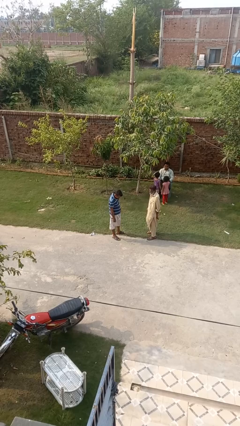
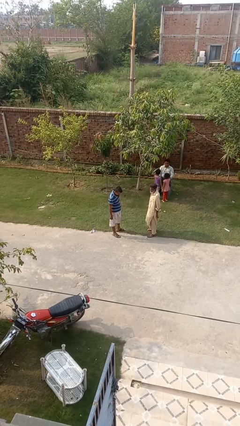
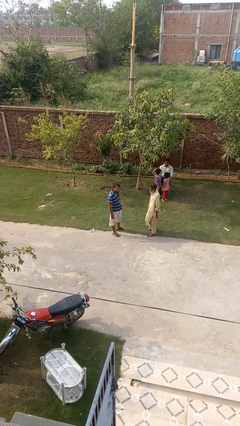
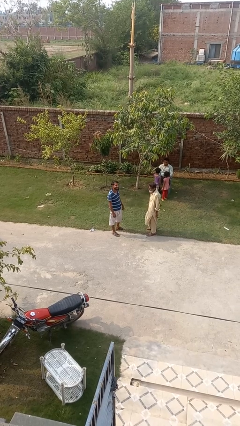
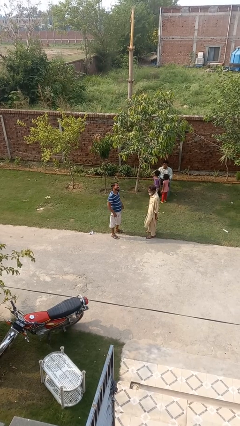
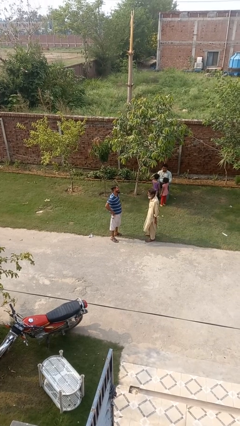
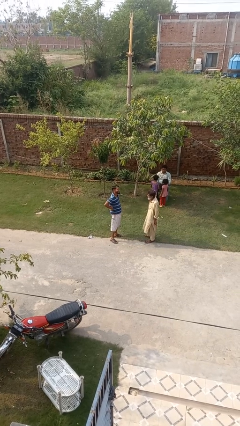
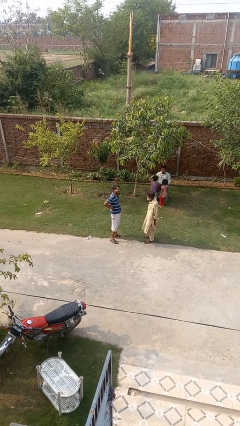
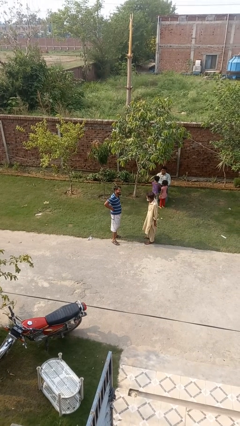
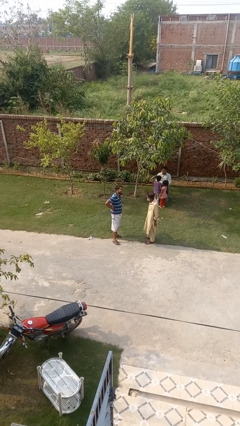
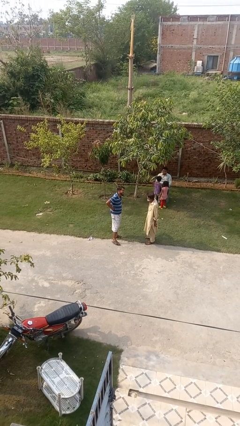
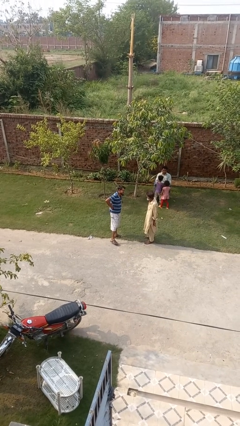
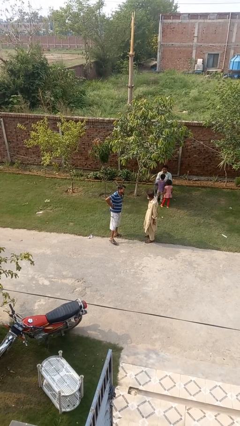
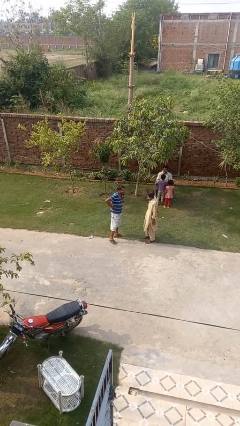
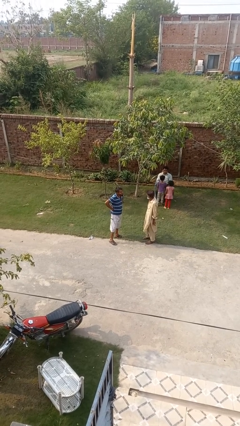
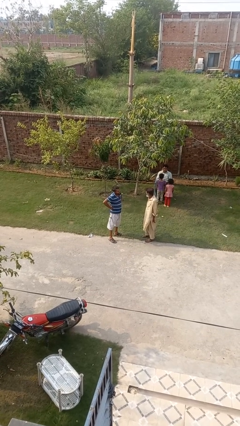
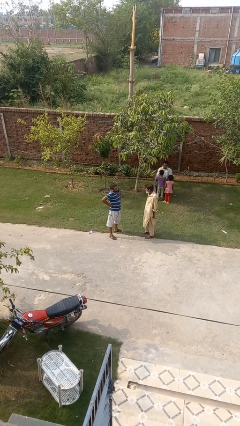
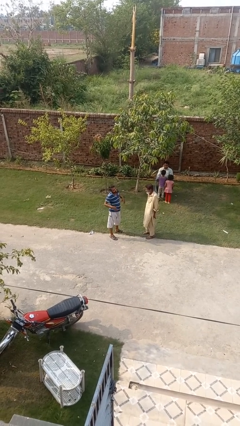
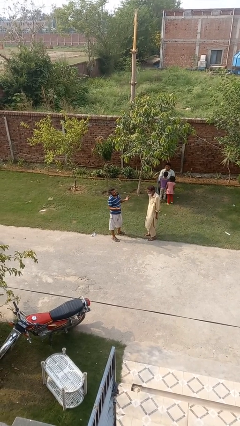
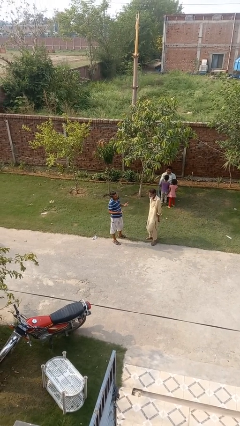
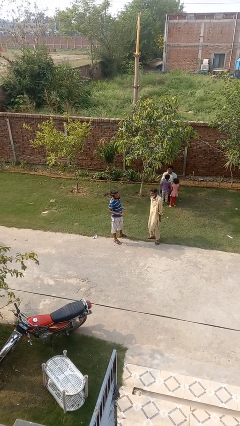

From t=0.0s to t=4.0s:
person laughs with person

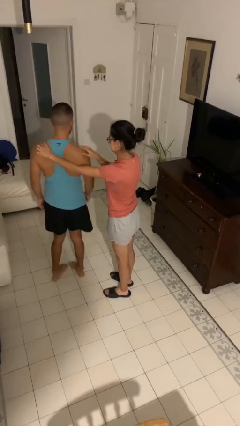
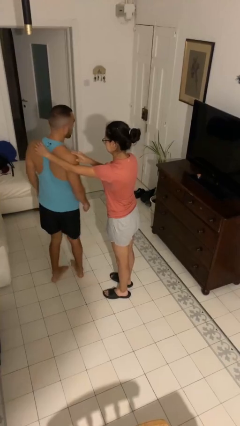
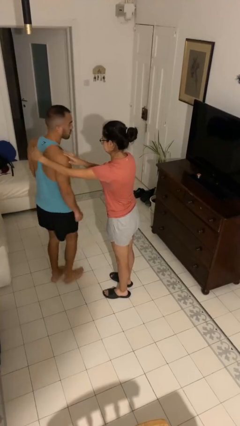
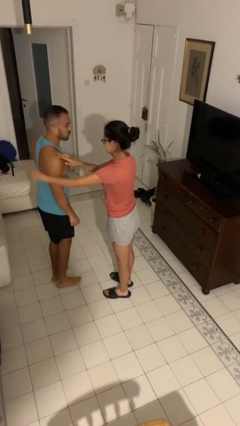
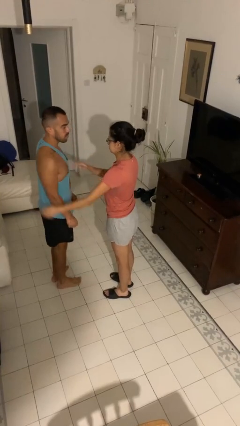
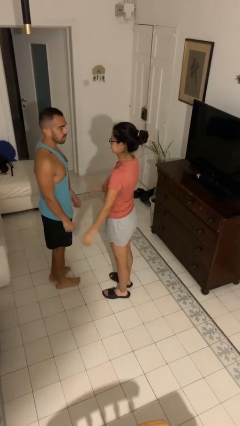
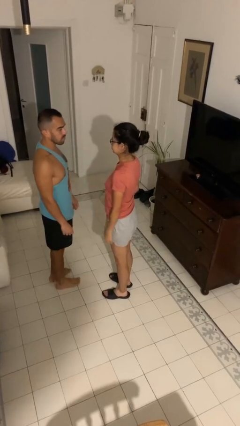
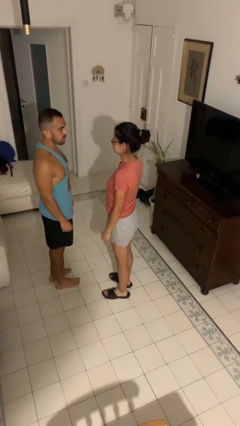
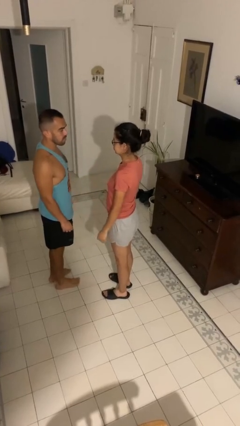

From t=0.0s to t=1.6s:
person spins person around

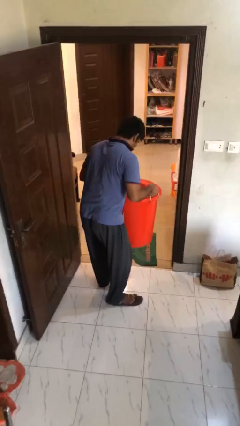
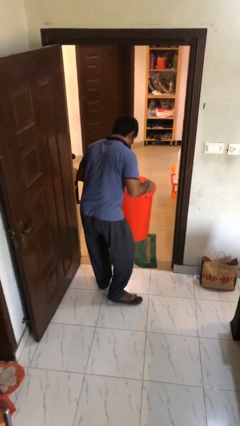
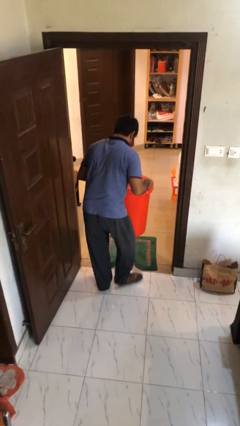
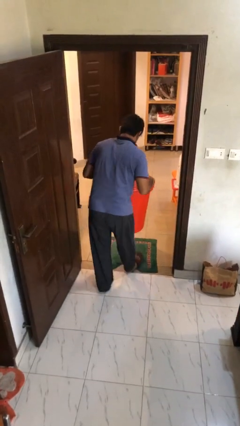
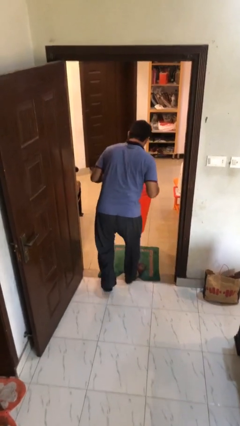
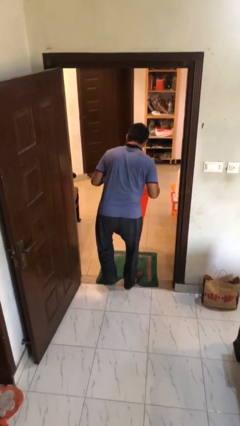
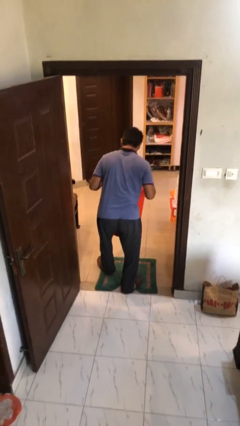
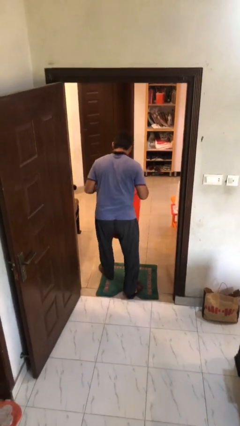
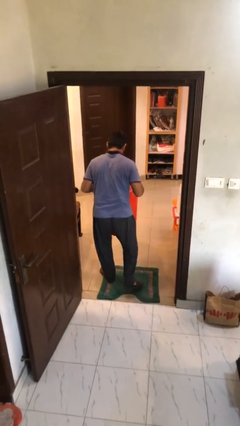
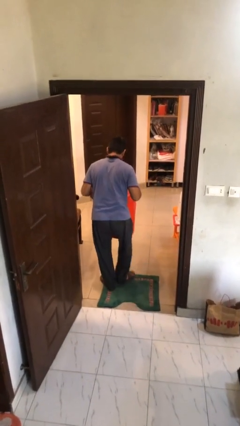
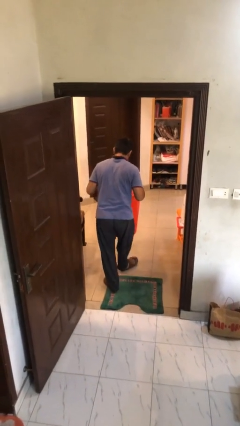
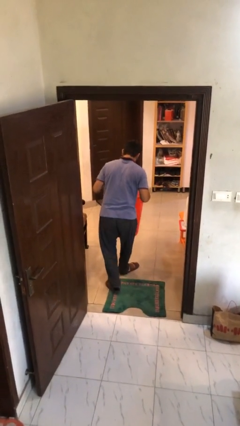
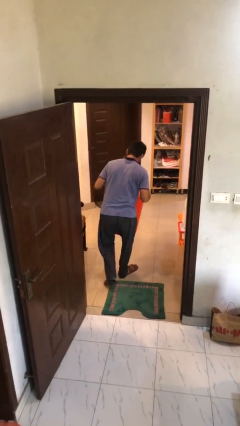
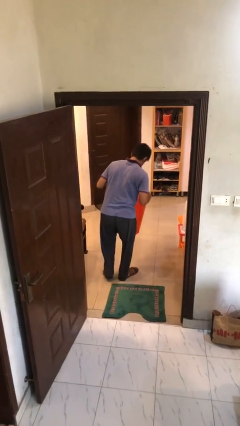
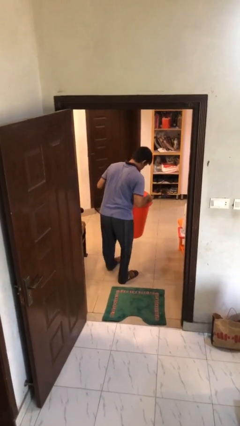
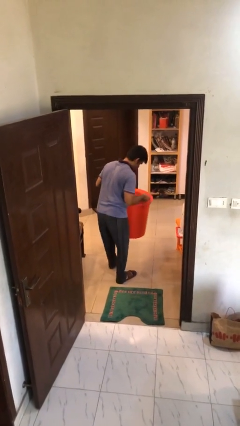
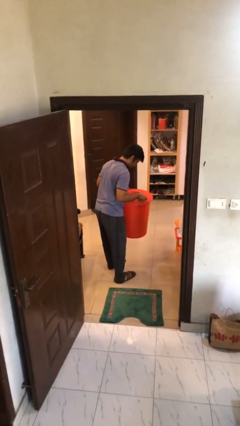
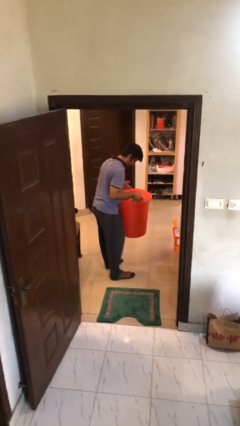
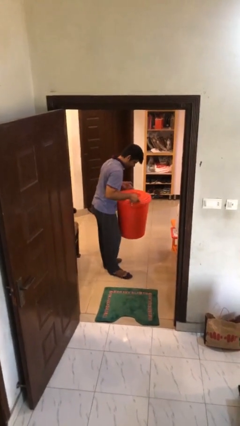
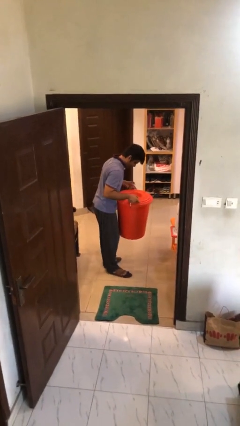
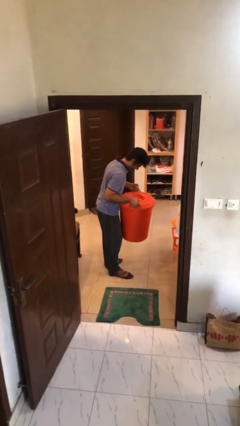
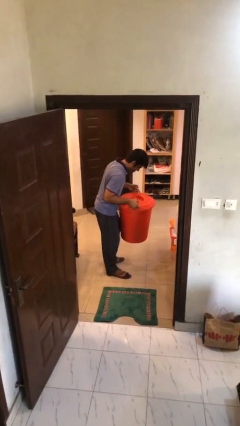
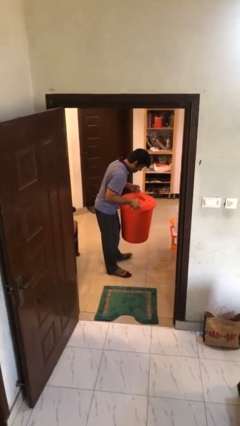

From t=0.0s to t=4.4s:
person carries heavy object

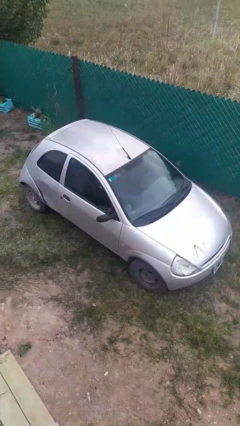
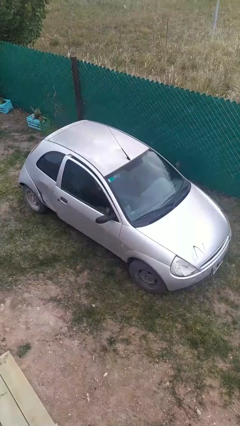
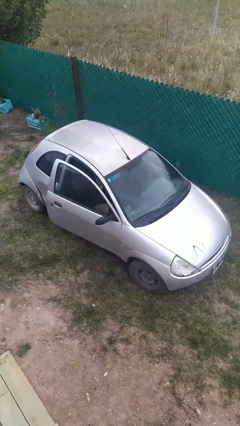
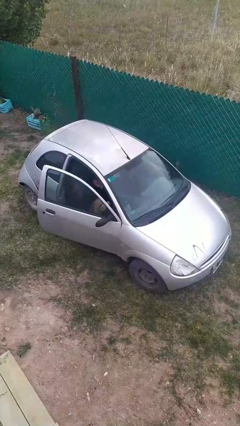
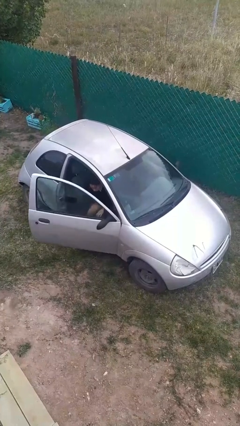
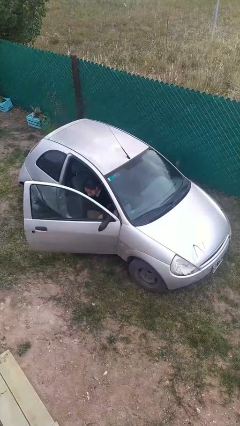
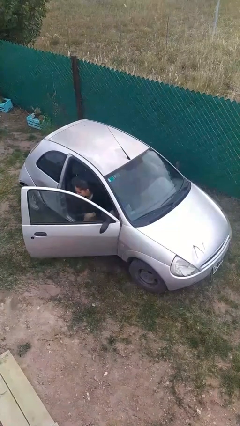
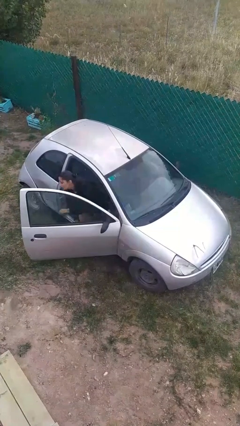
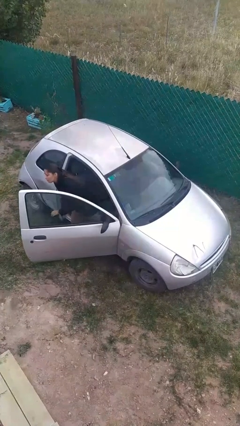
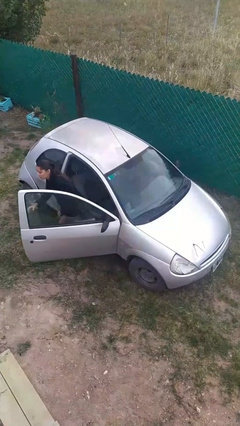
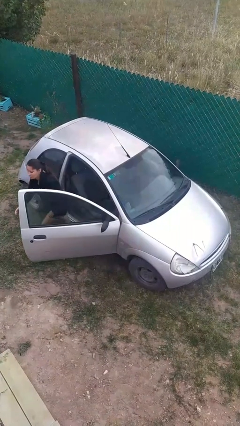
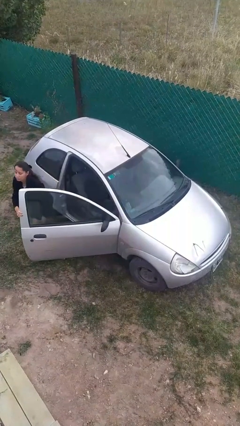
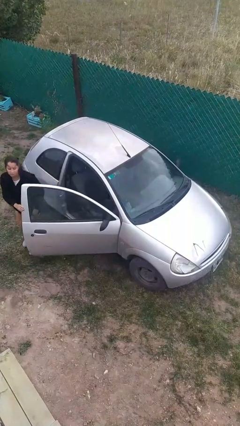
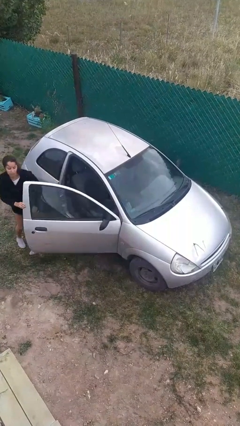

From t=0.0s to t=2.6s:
car drops off person

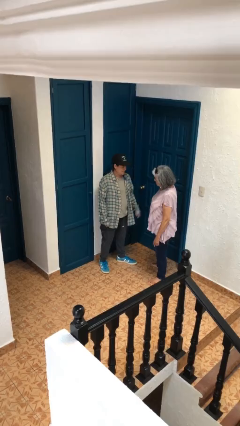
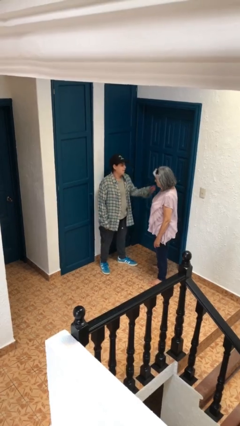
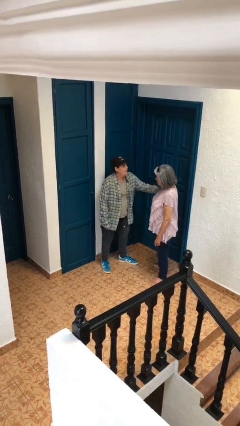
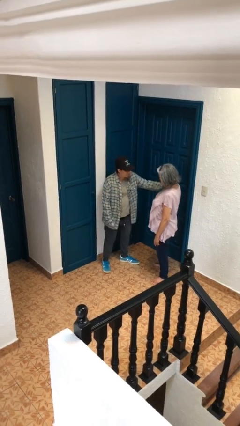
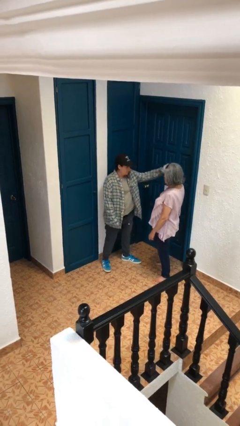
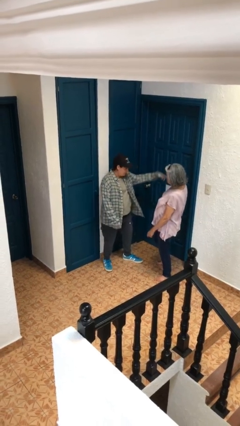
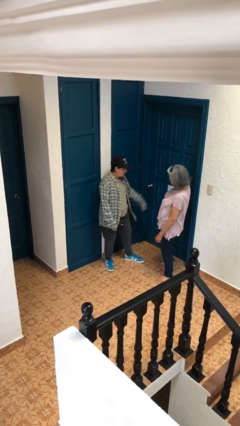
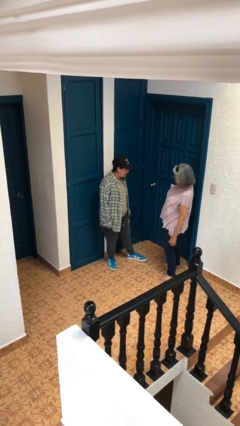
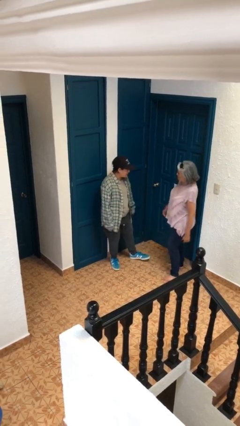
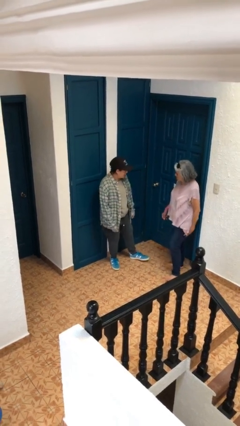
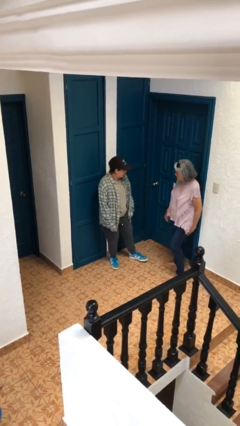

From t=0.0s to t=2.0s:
person shoves person

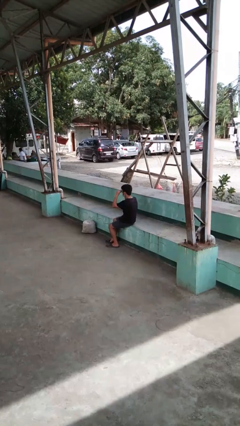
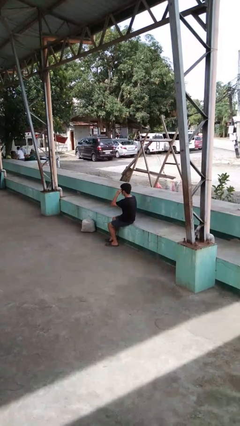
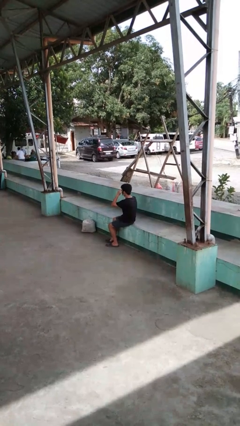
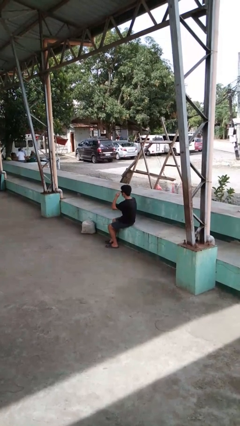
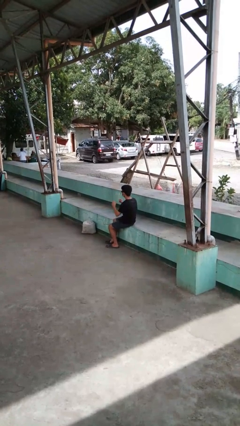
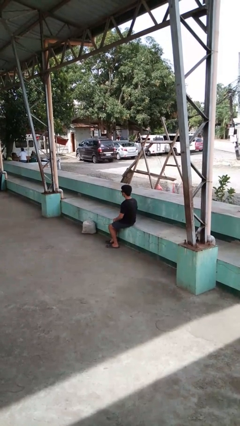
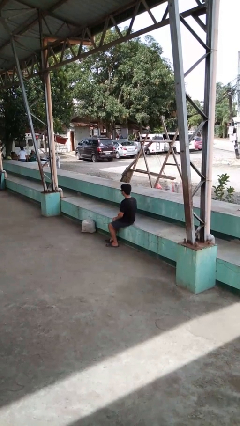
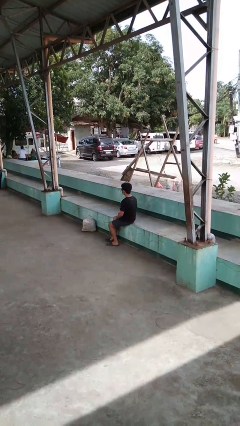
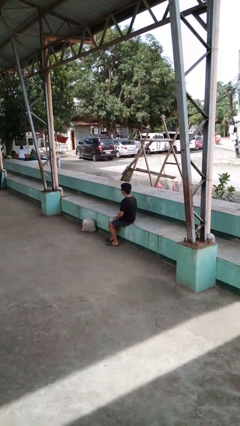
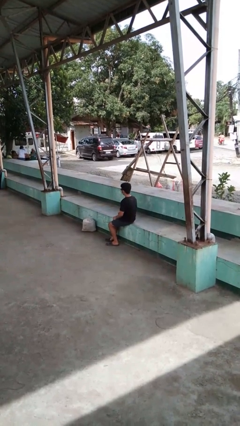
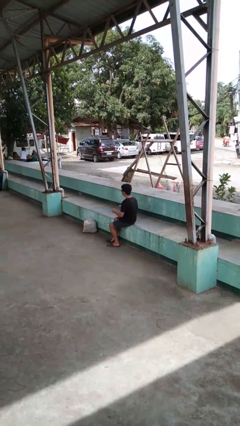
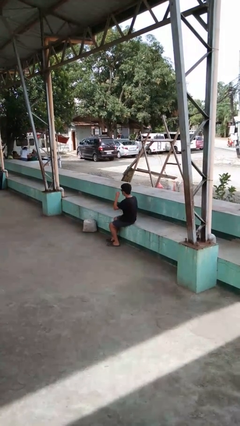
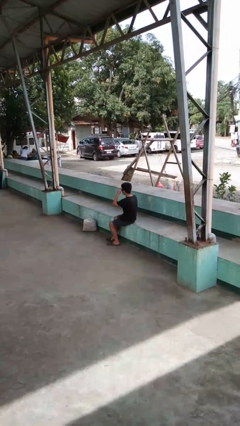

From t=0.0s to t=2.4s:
person brushes hair

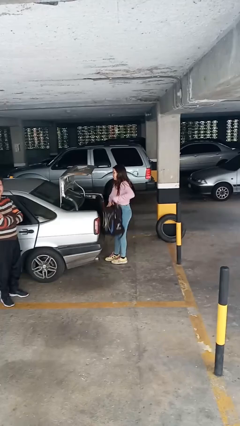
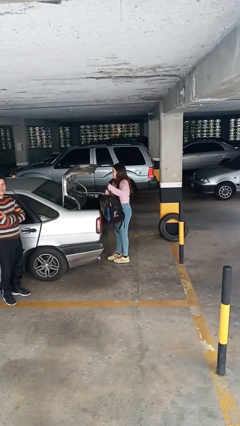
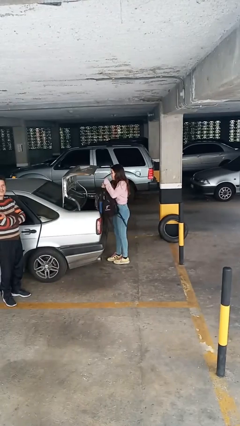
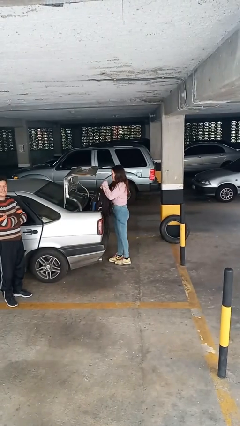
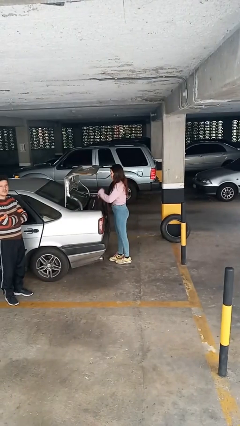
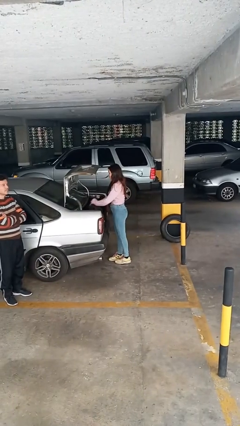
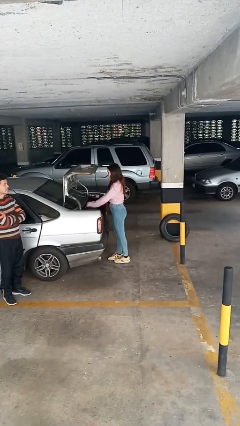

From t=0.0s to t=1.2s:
person loads car
